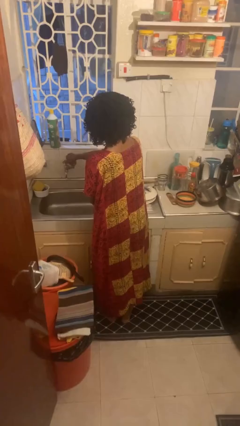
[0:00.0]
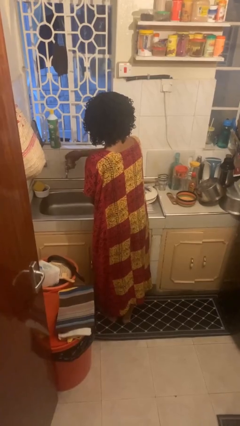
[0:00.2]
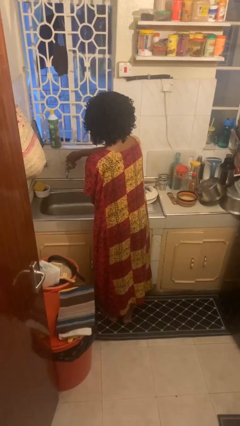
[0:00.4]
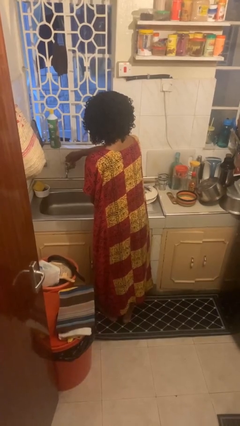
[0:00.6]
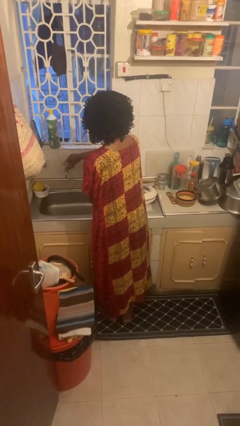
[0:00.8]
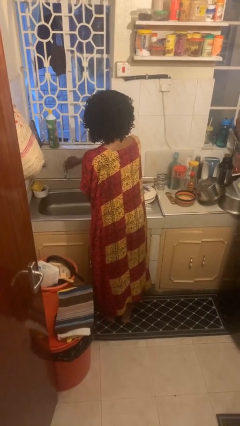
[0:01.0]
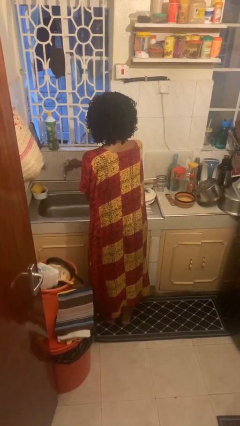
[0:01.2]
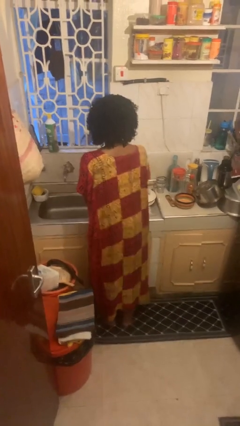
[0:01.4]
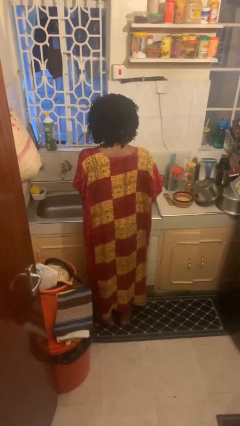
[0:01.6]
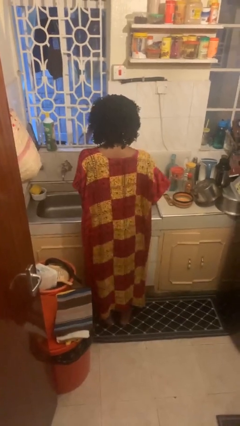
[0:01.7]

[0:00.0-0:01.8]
person turns off faucet

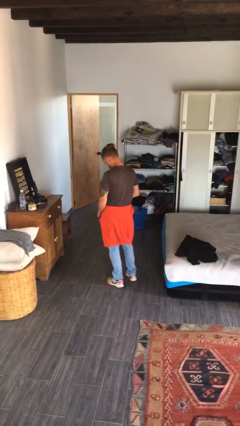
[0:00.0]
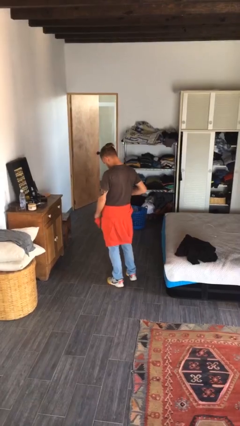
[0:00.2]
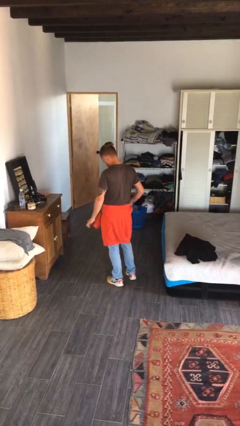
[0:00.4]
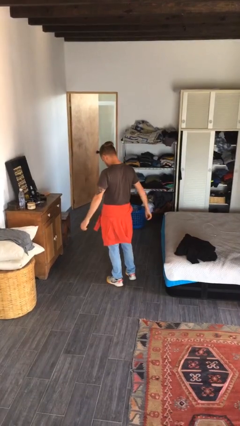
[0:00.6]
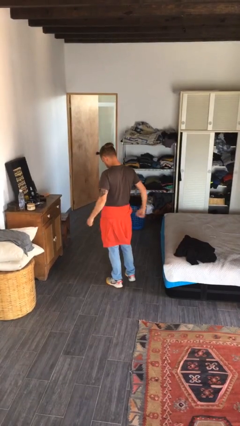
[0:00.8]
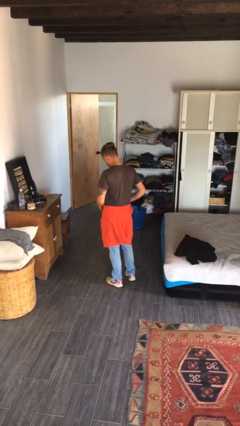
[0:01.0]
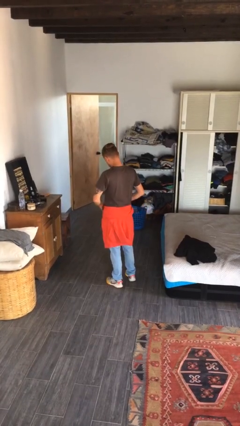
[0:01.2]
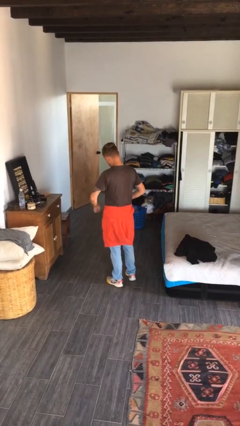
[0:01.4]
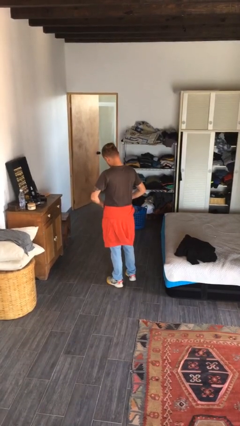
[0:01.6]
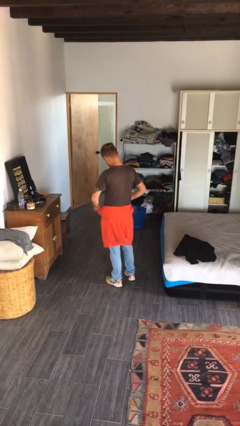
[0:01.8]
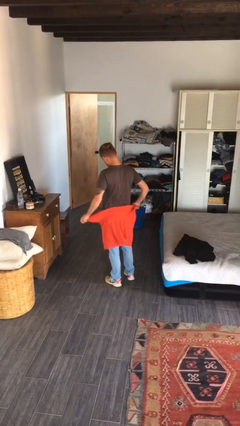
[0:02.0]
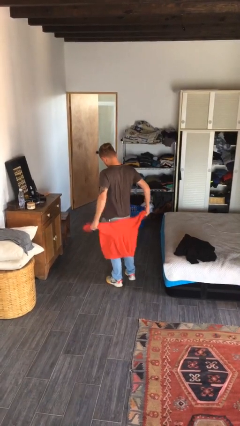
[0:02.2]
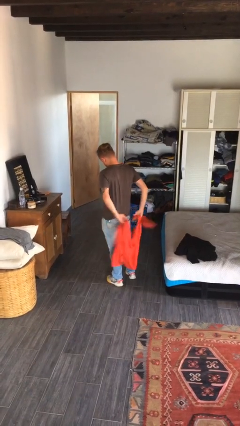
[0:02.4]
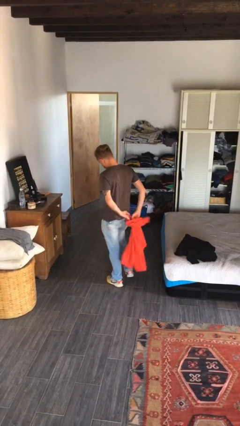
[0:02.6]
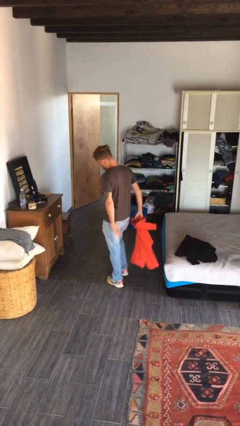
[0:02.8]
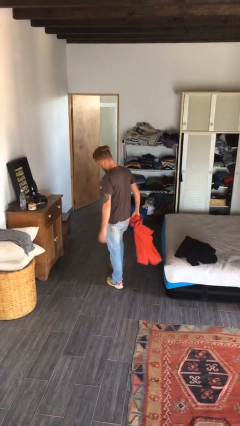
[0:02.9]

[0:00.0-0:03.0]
person unties jacket around waist

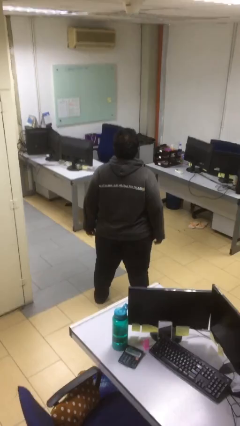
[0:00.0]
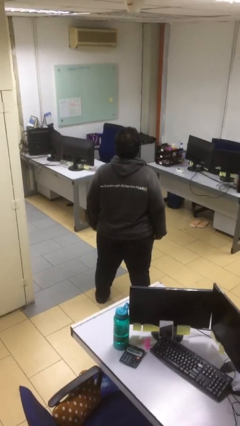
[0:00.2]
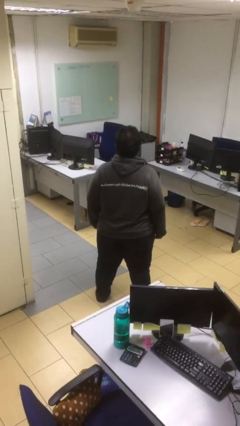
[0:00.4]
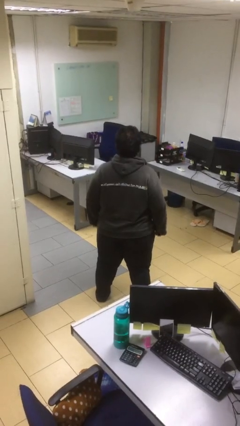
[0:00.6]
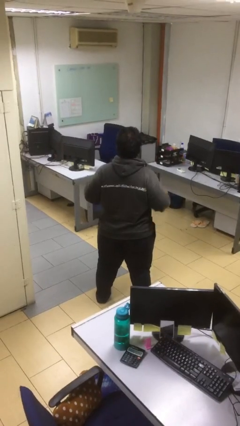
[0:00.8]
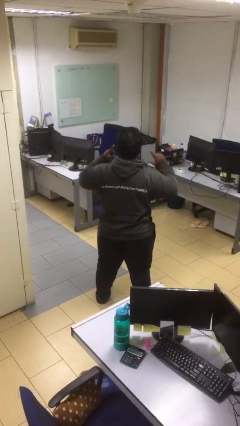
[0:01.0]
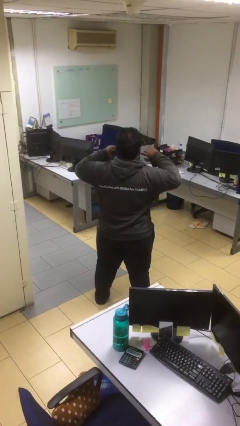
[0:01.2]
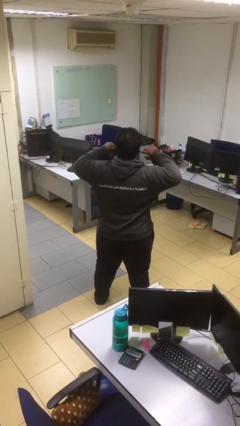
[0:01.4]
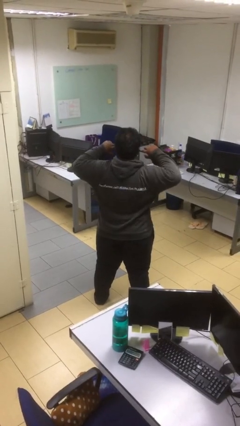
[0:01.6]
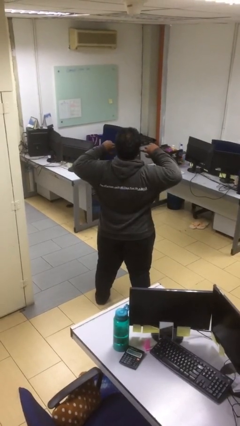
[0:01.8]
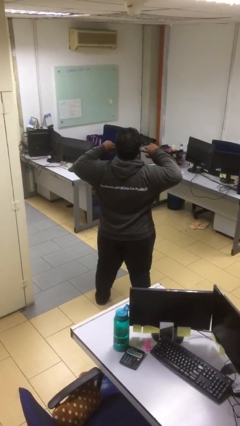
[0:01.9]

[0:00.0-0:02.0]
person puts fingers in ear

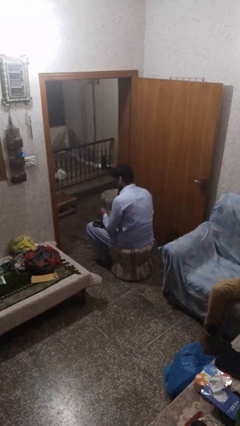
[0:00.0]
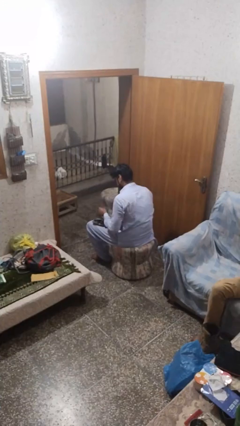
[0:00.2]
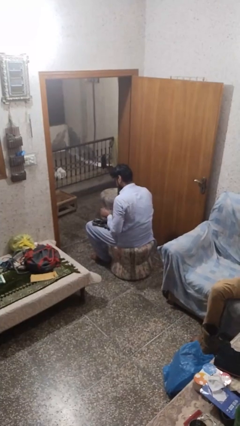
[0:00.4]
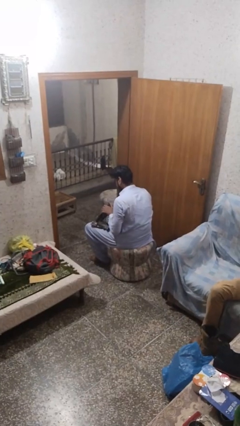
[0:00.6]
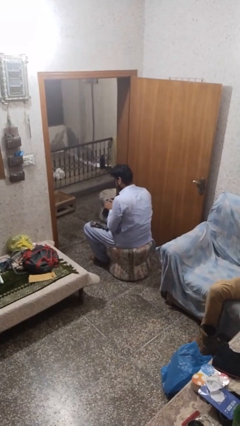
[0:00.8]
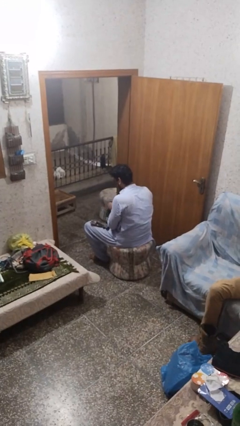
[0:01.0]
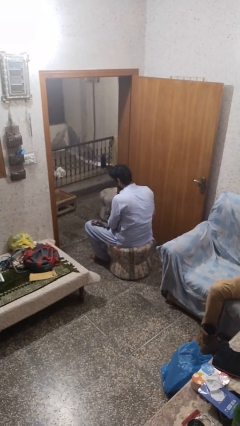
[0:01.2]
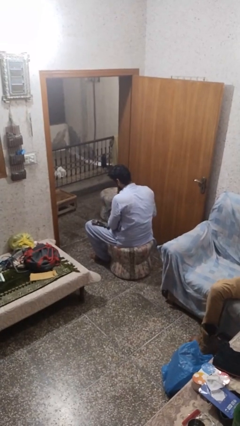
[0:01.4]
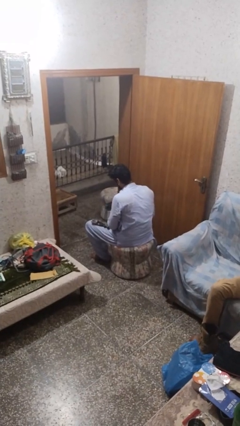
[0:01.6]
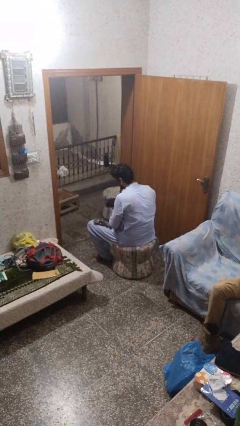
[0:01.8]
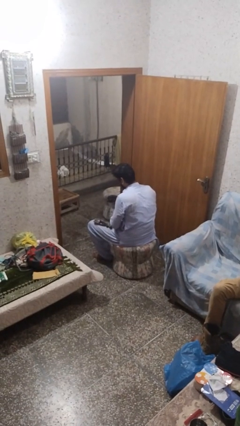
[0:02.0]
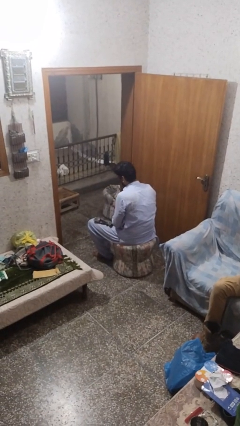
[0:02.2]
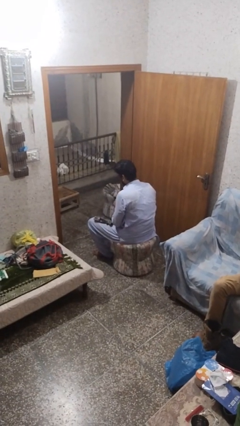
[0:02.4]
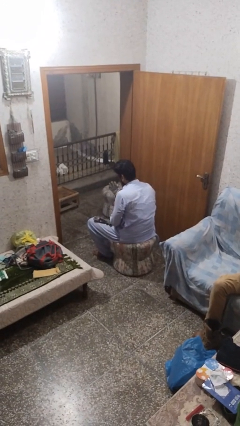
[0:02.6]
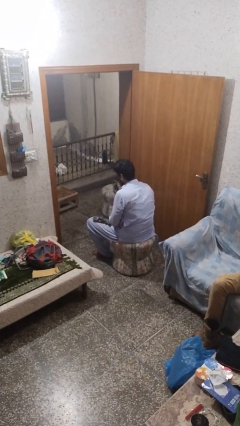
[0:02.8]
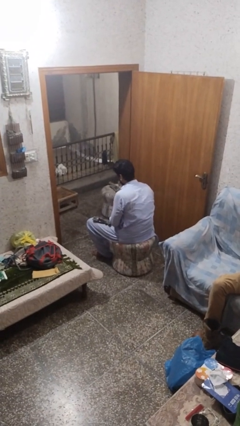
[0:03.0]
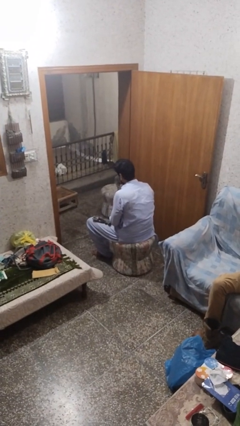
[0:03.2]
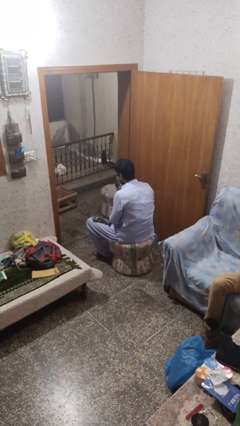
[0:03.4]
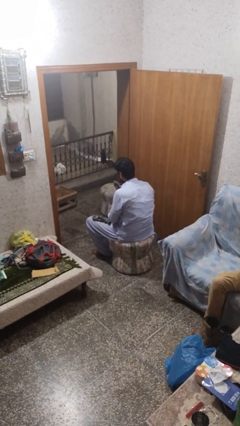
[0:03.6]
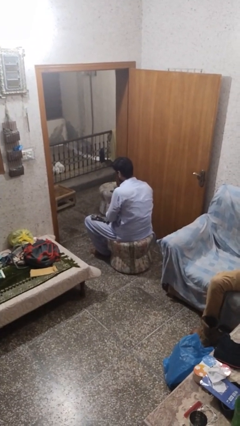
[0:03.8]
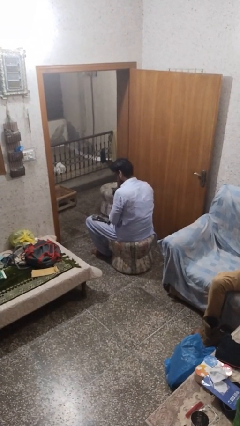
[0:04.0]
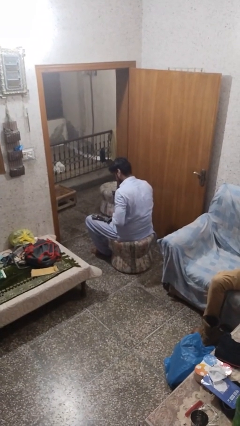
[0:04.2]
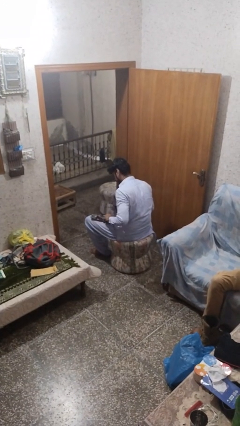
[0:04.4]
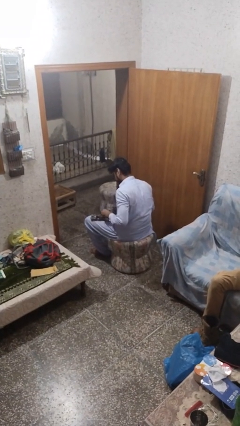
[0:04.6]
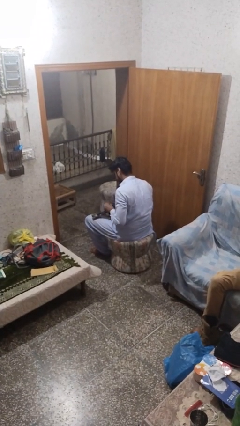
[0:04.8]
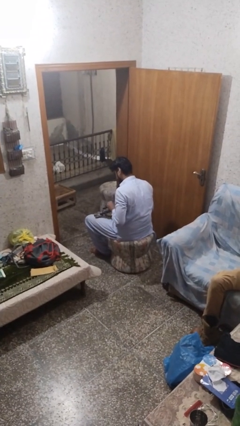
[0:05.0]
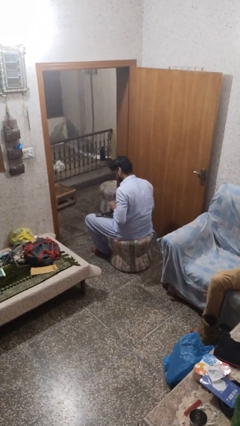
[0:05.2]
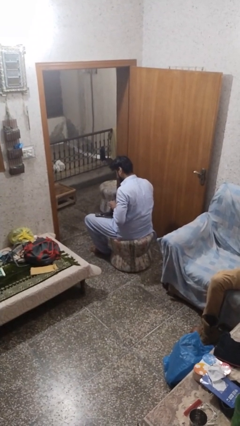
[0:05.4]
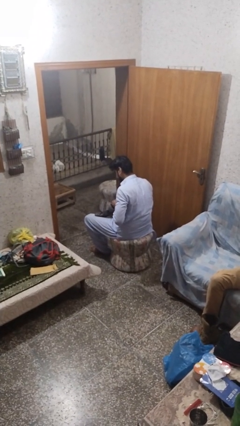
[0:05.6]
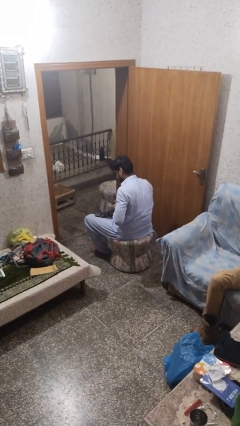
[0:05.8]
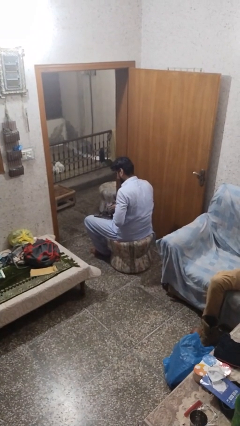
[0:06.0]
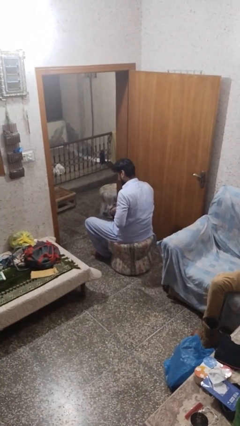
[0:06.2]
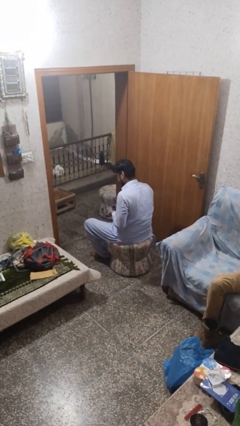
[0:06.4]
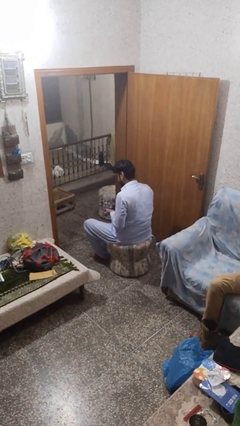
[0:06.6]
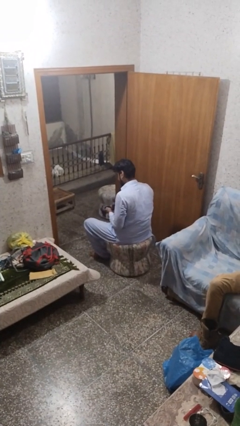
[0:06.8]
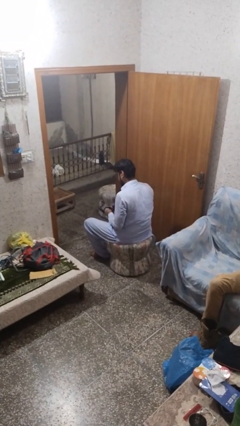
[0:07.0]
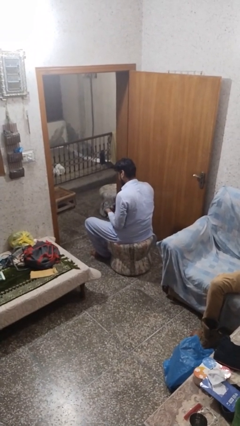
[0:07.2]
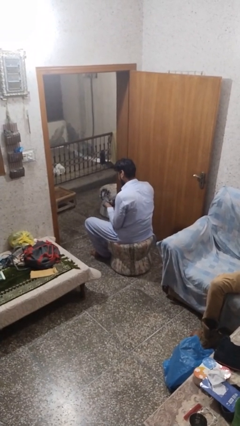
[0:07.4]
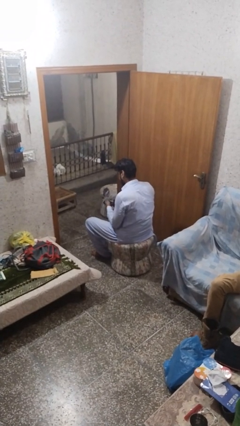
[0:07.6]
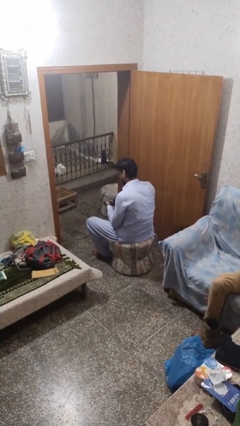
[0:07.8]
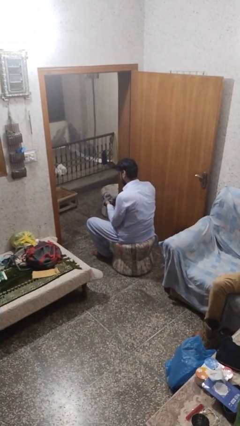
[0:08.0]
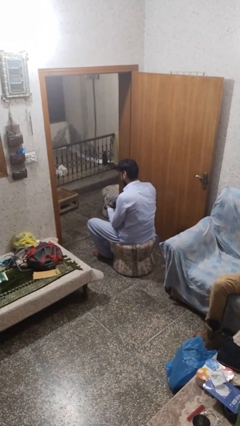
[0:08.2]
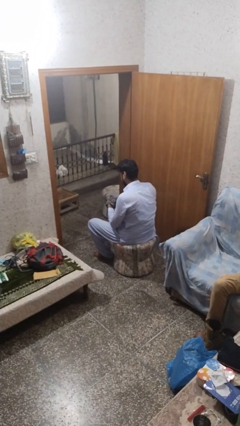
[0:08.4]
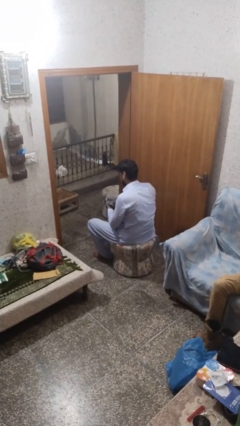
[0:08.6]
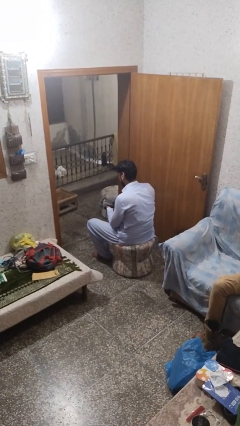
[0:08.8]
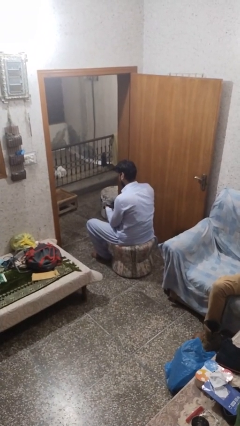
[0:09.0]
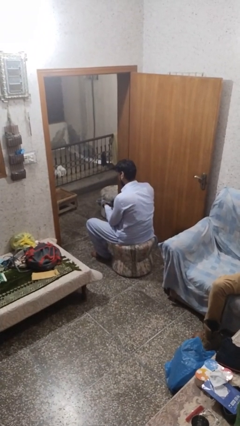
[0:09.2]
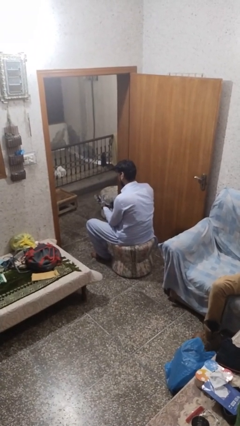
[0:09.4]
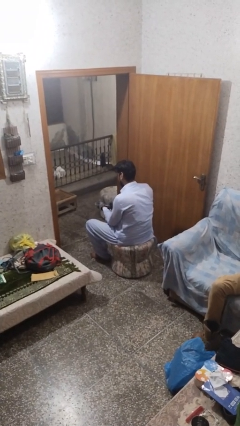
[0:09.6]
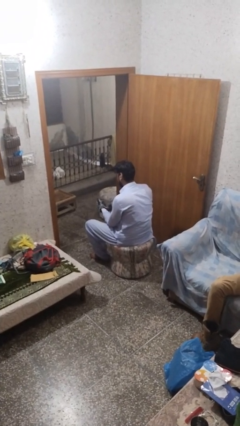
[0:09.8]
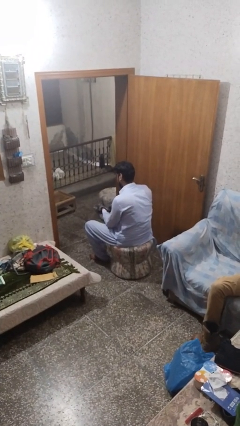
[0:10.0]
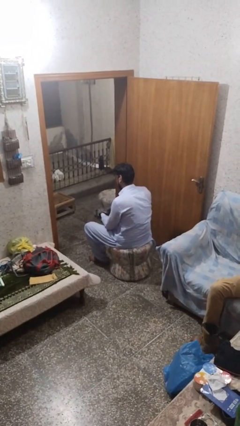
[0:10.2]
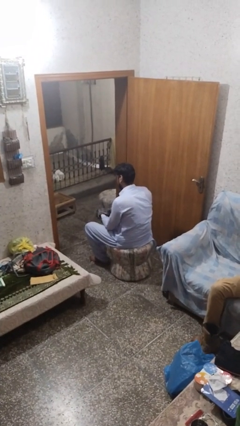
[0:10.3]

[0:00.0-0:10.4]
person puts on gloves

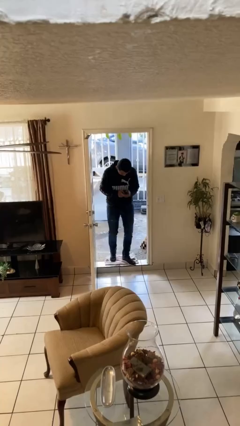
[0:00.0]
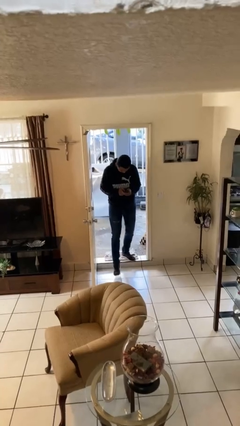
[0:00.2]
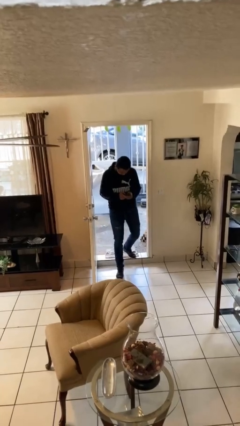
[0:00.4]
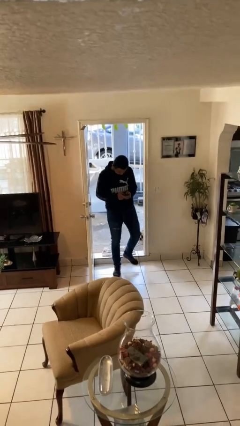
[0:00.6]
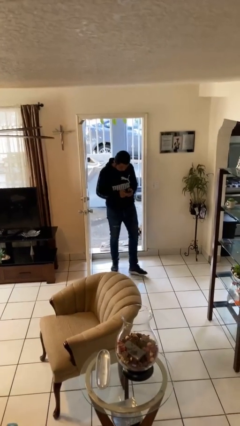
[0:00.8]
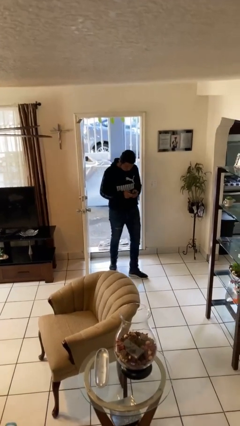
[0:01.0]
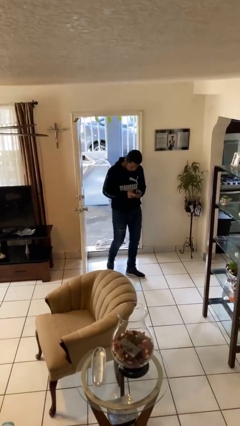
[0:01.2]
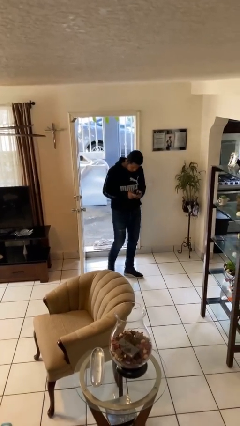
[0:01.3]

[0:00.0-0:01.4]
person enters scene through structure
